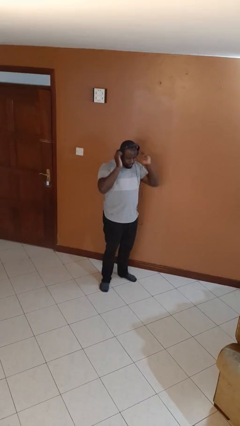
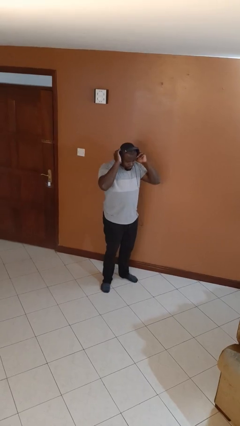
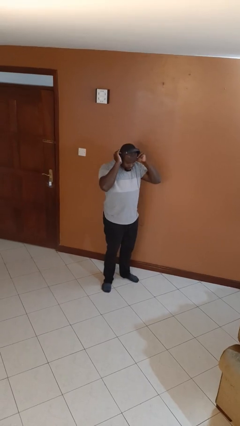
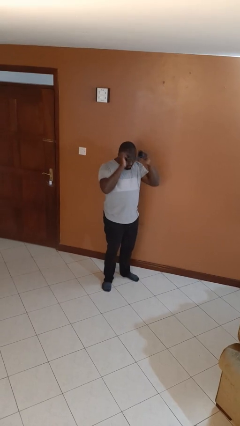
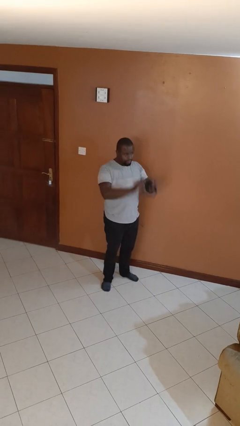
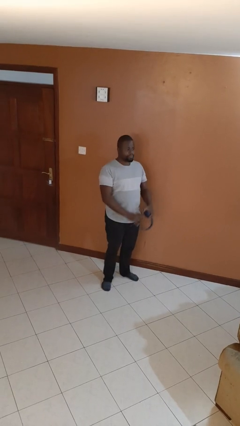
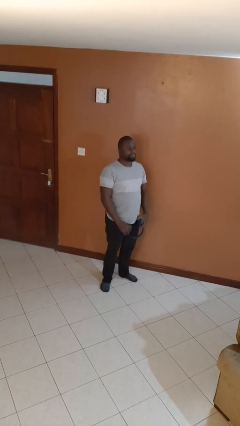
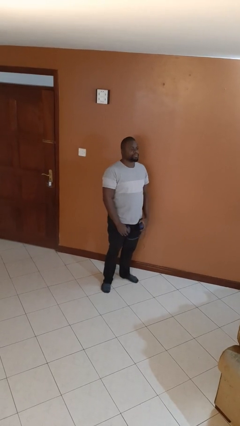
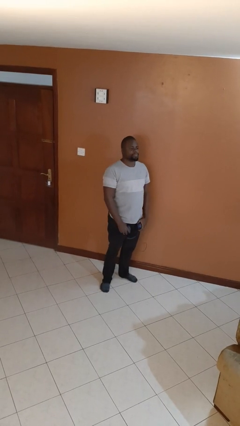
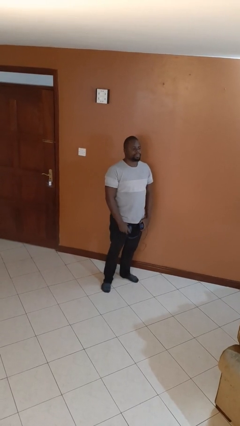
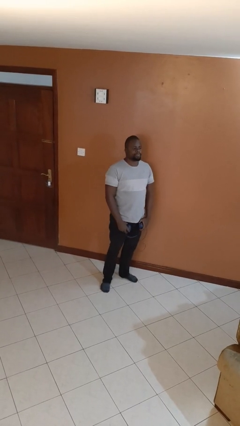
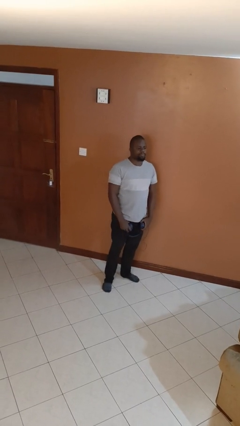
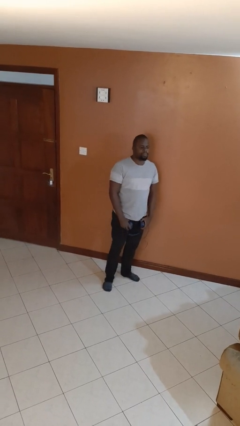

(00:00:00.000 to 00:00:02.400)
person takes off headphones

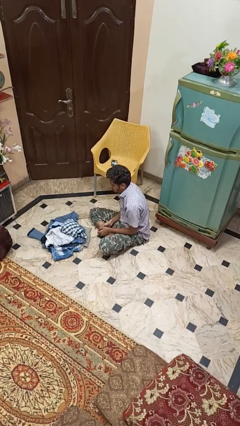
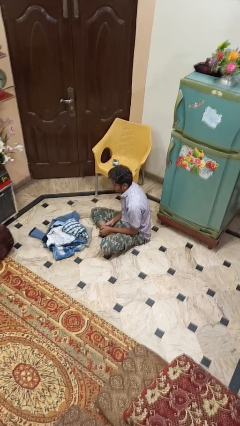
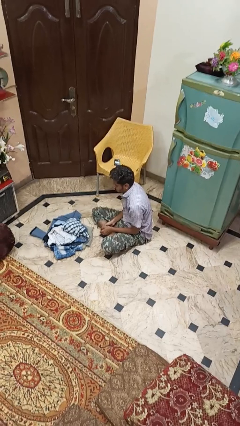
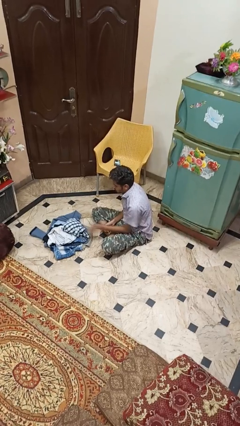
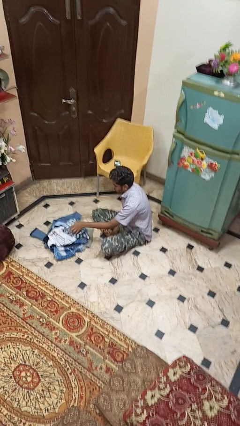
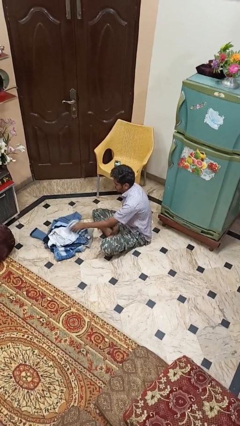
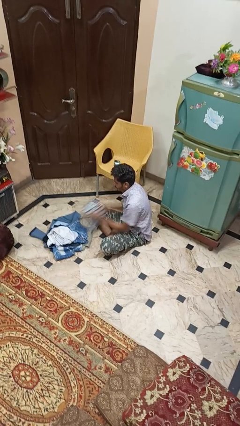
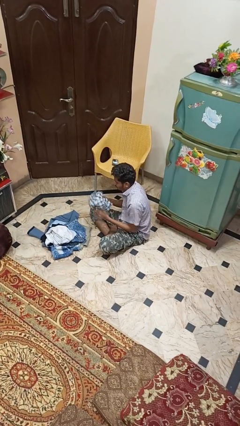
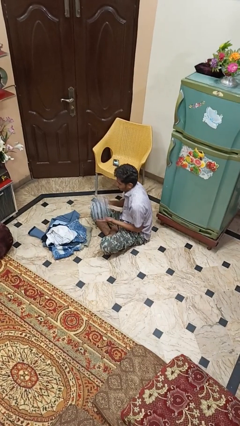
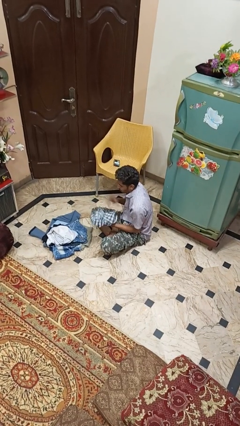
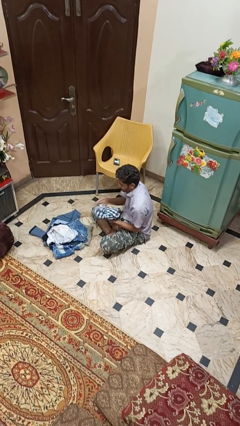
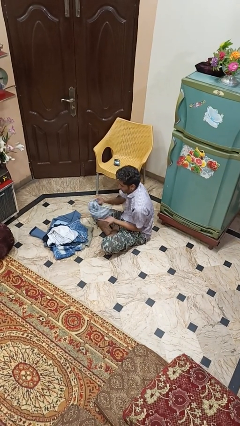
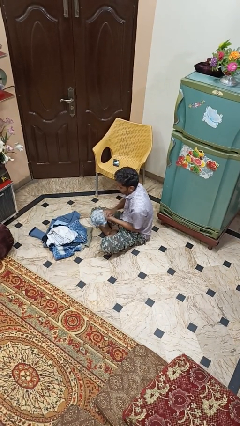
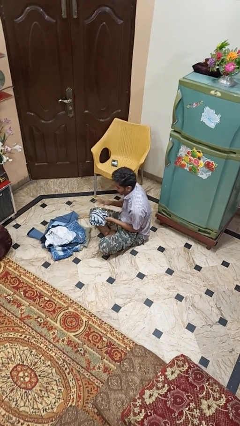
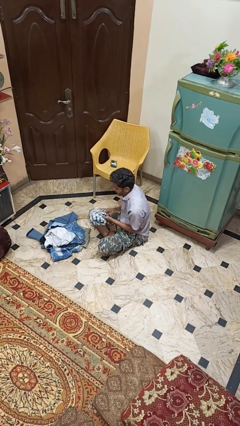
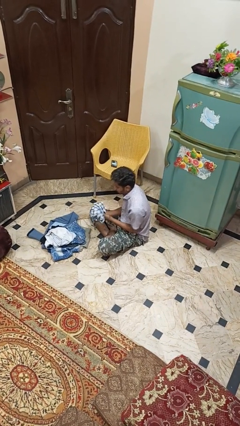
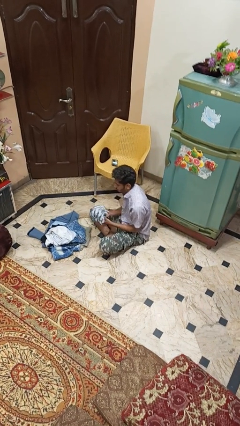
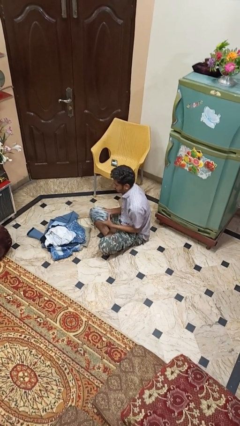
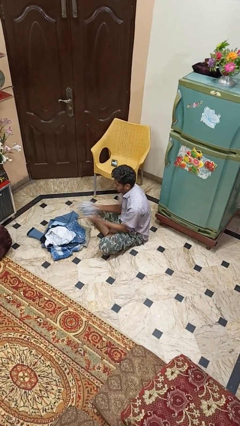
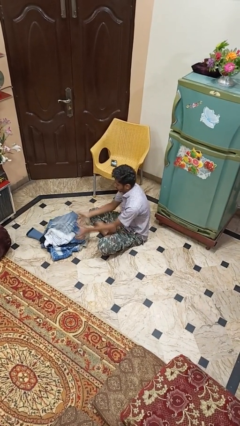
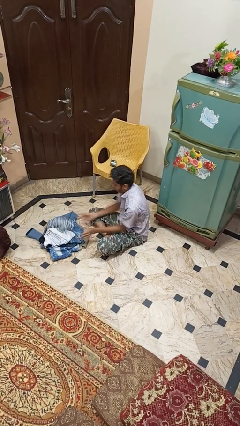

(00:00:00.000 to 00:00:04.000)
person folds shirt

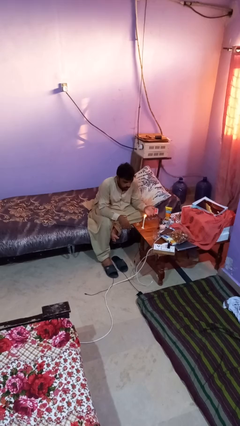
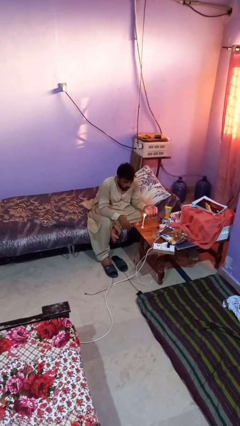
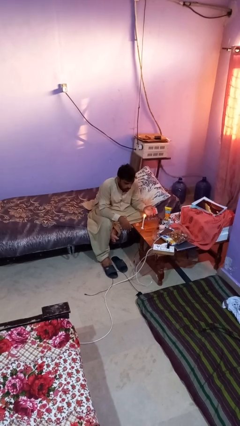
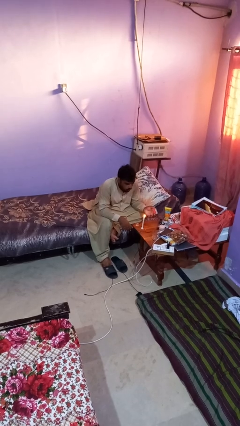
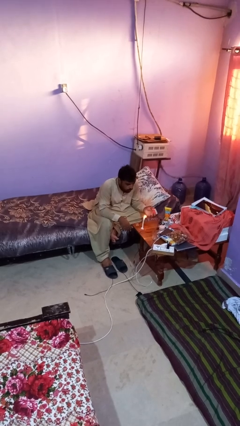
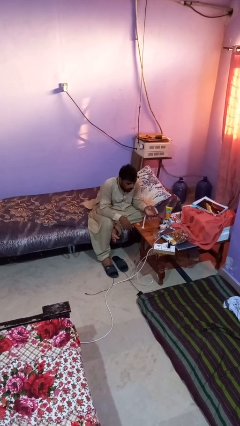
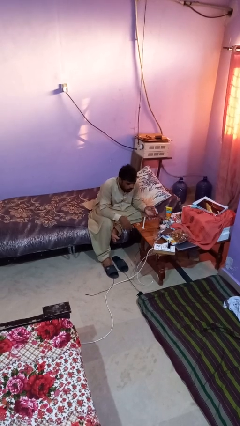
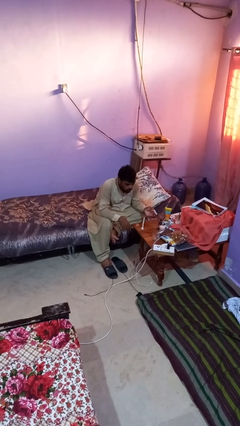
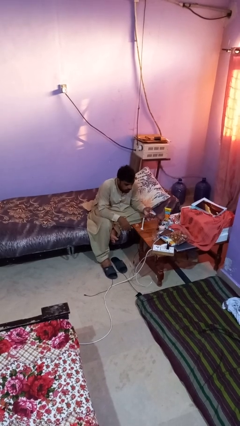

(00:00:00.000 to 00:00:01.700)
person extinguishes candle

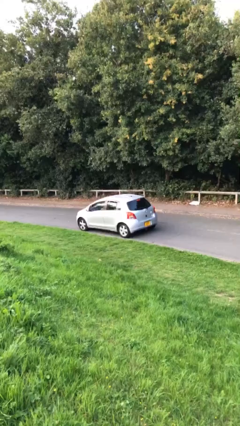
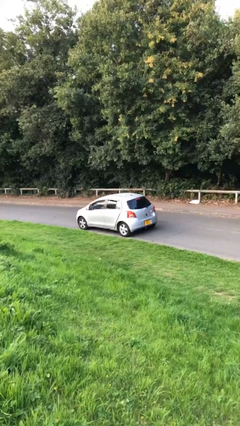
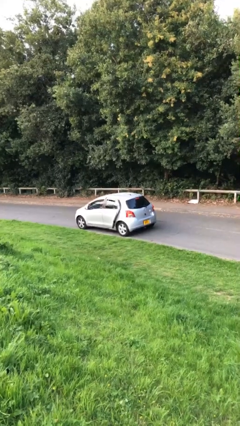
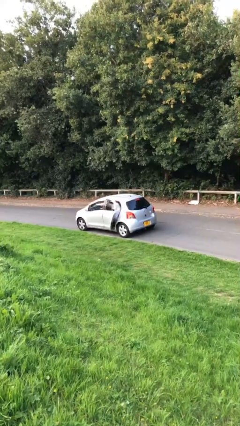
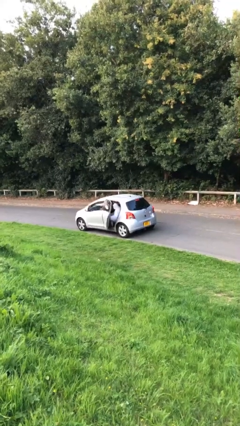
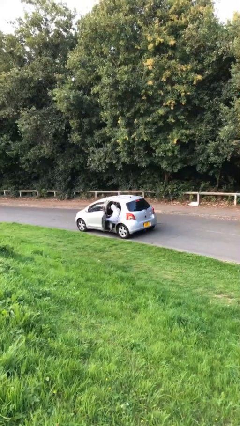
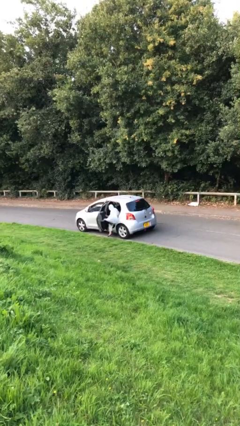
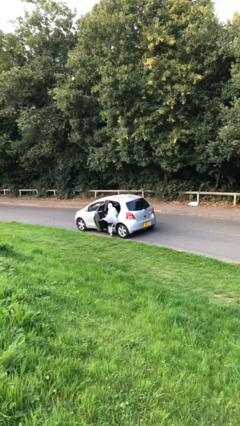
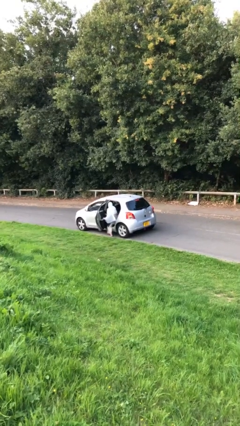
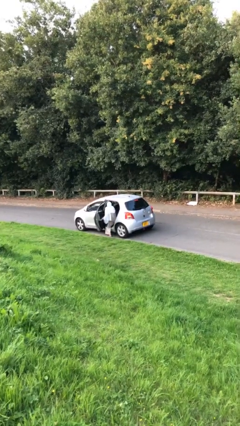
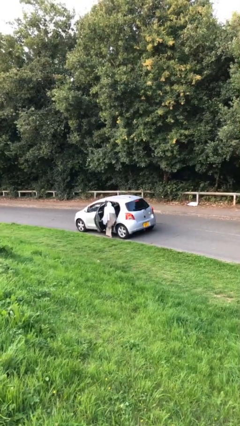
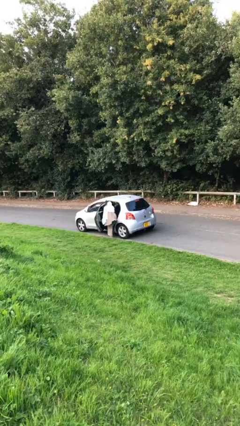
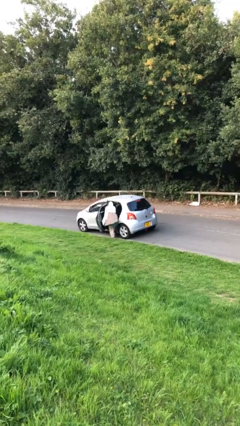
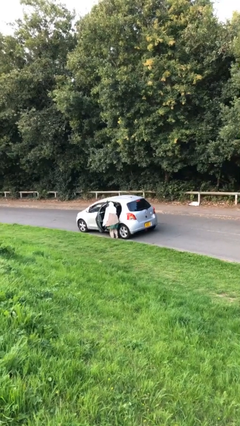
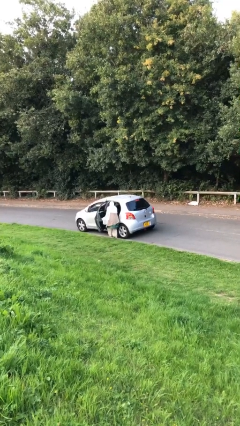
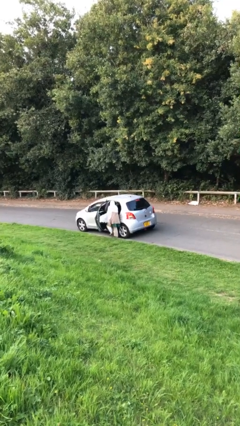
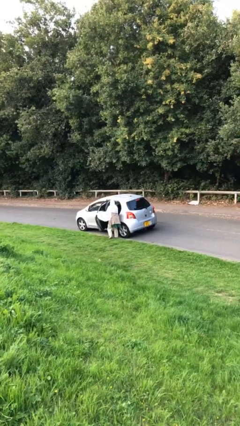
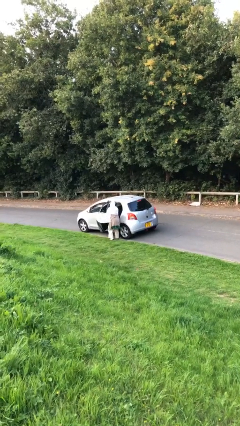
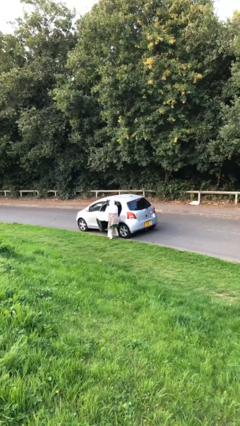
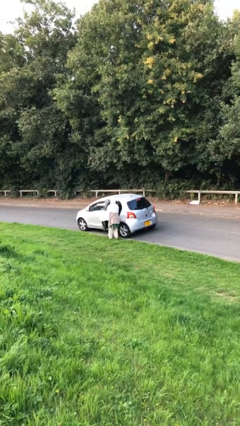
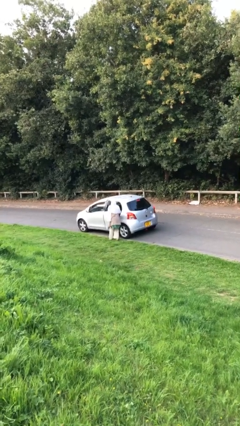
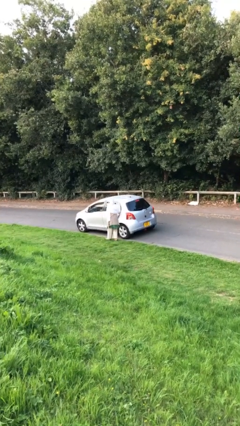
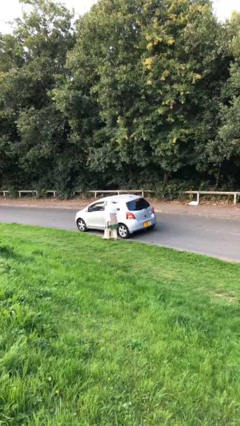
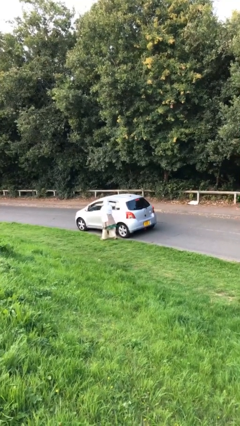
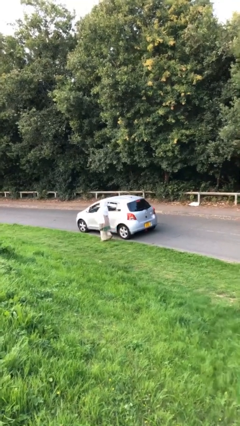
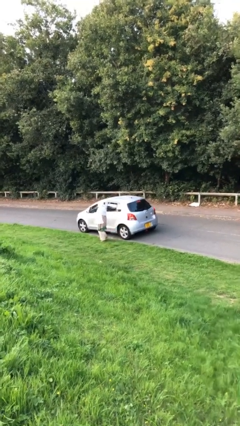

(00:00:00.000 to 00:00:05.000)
car drops off person

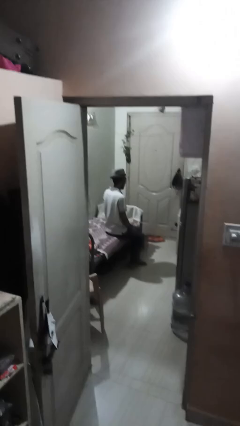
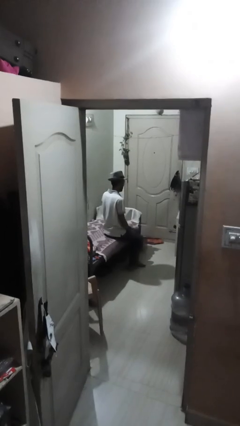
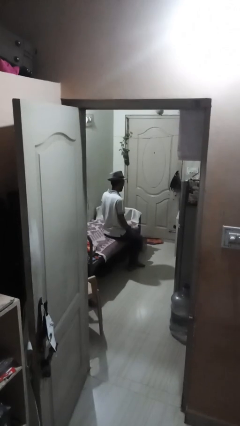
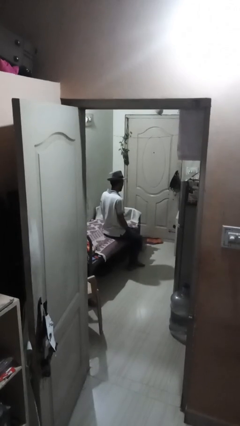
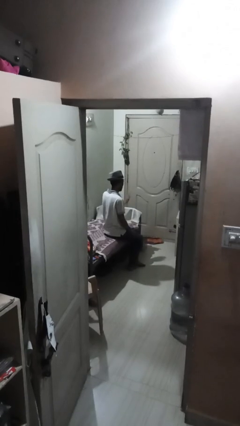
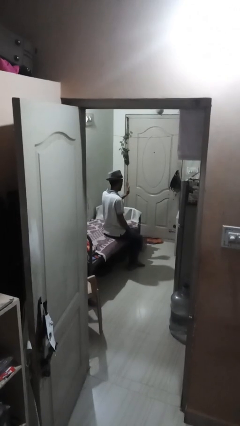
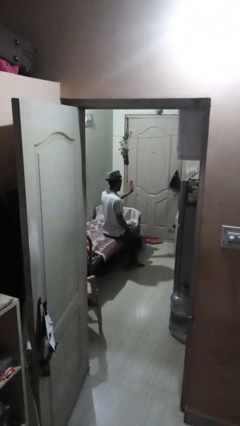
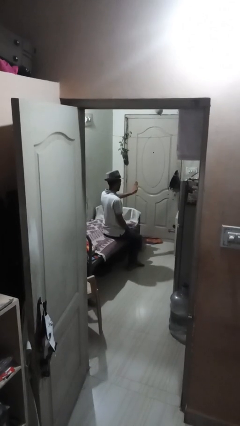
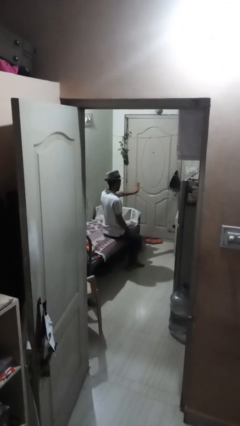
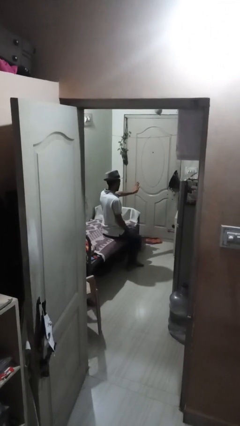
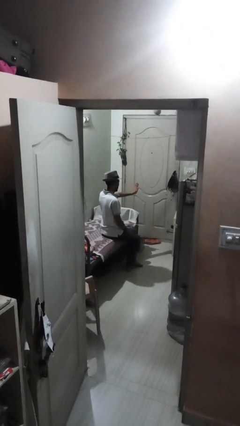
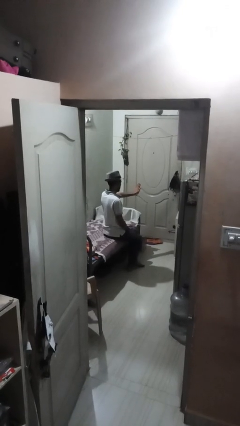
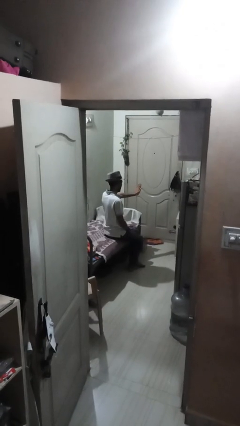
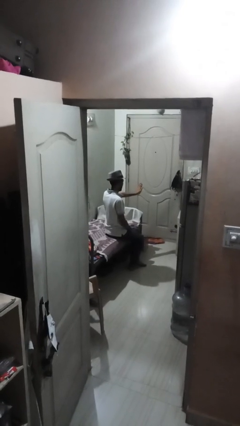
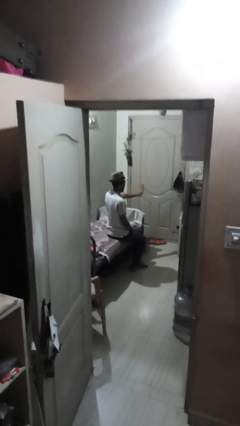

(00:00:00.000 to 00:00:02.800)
person gestures stop

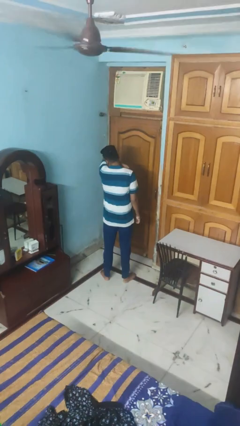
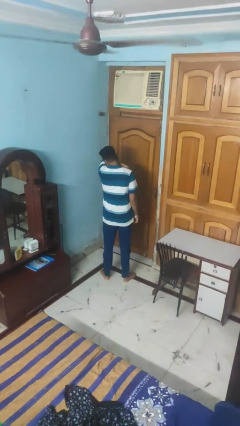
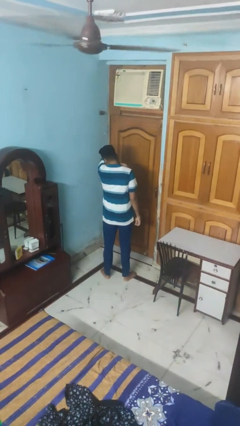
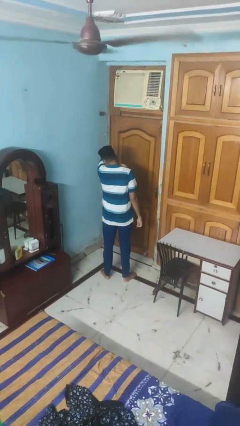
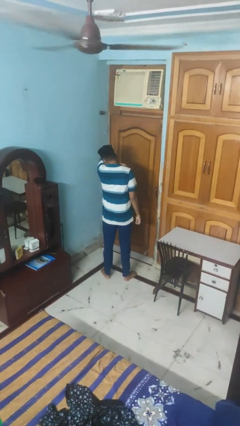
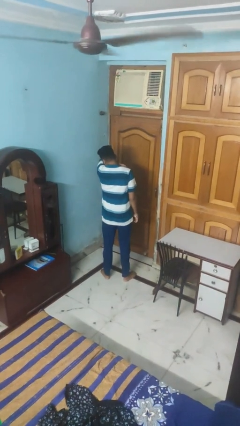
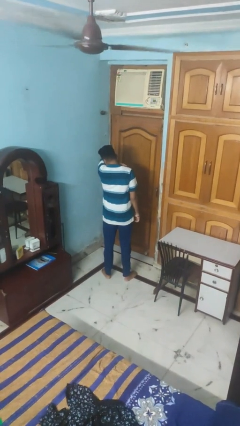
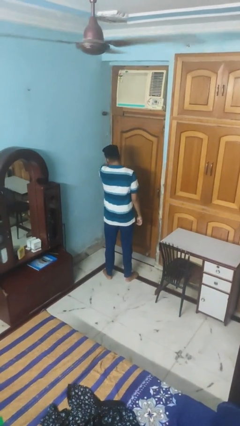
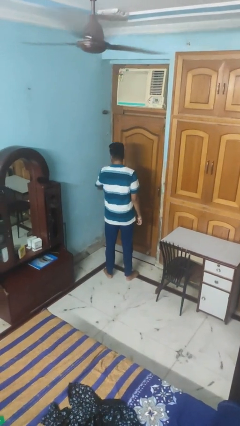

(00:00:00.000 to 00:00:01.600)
person sneezes into arm

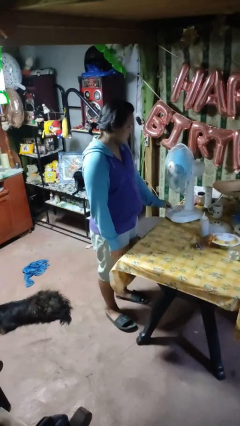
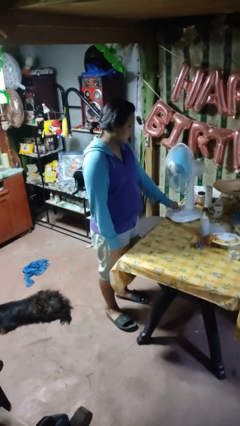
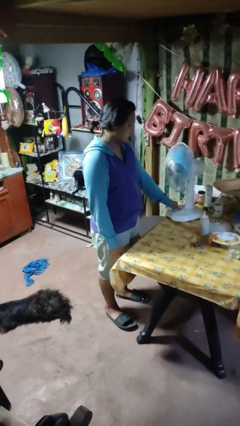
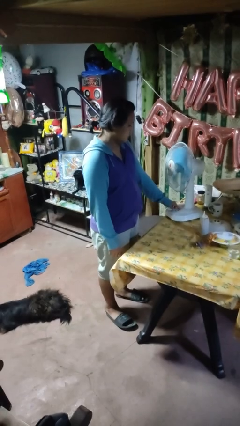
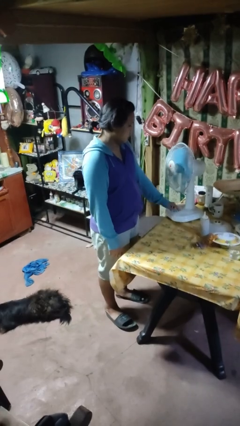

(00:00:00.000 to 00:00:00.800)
person turns off fan
